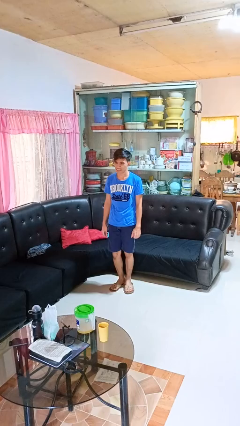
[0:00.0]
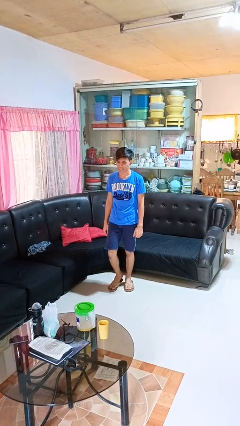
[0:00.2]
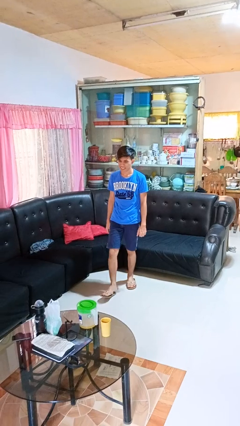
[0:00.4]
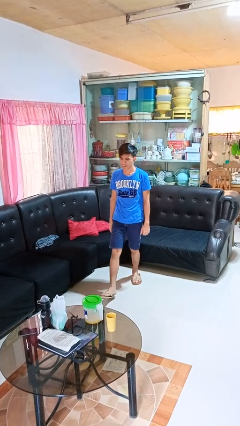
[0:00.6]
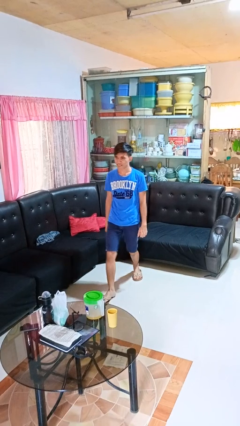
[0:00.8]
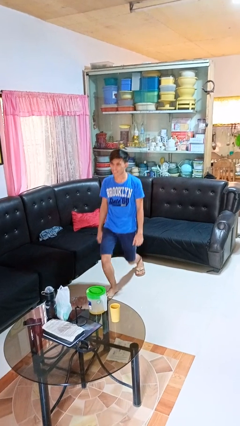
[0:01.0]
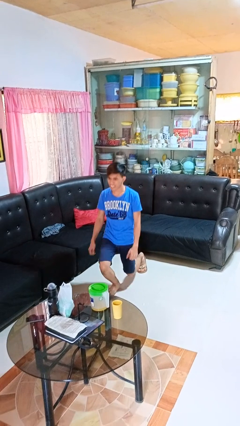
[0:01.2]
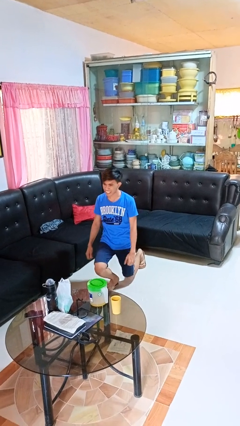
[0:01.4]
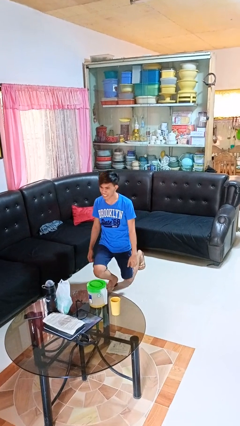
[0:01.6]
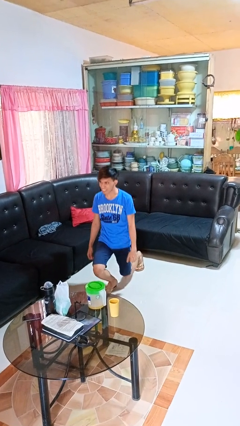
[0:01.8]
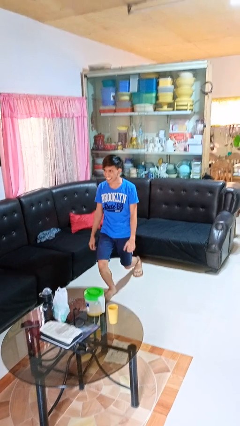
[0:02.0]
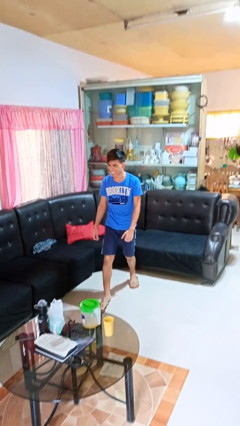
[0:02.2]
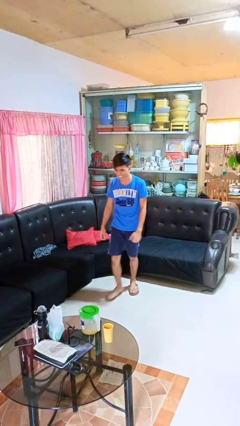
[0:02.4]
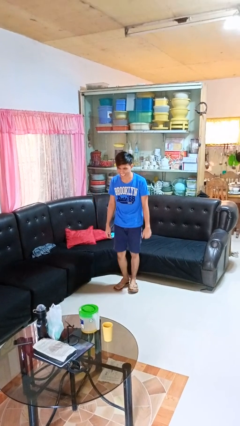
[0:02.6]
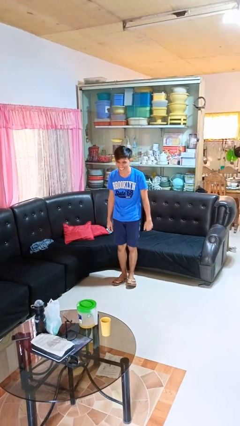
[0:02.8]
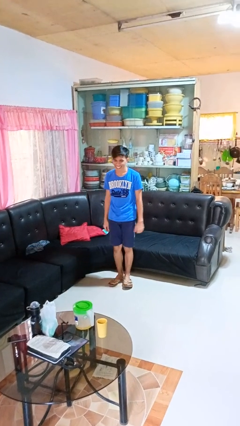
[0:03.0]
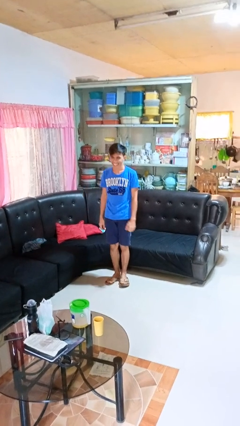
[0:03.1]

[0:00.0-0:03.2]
person exercises with lunges

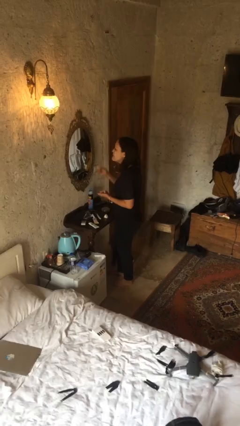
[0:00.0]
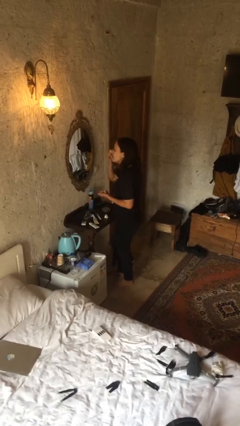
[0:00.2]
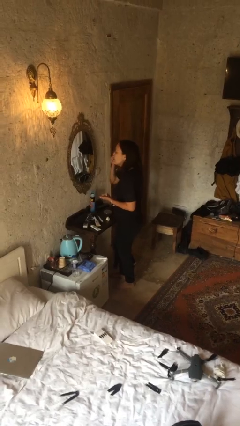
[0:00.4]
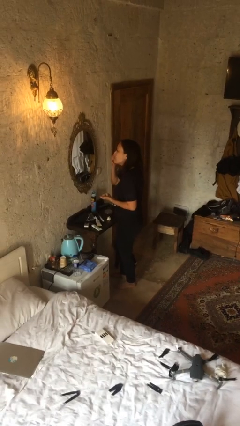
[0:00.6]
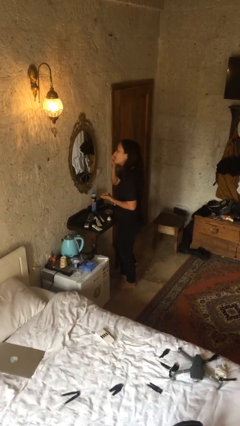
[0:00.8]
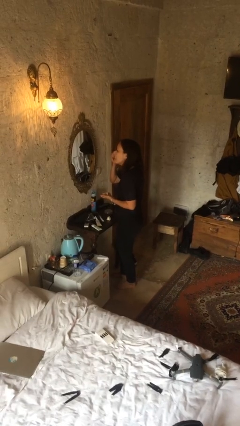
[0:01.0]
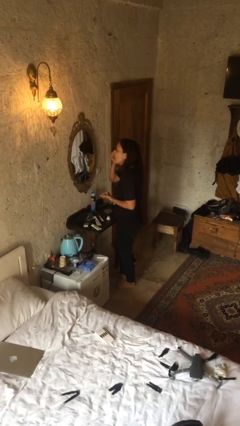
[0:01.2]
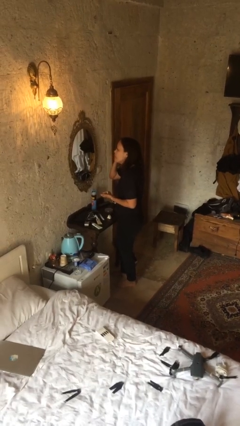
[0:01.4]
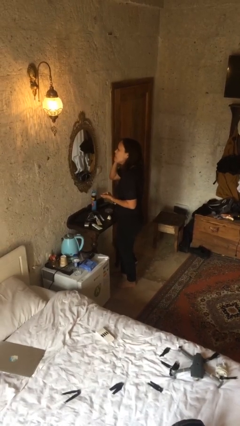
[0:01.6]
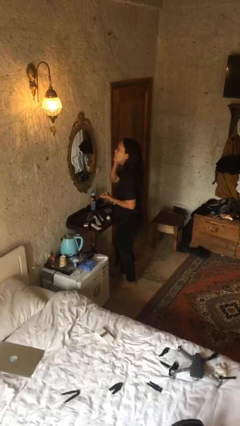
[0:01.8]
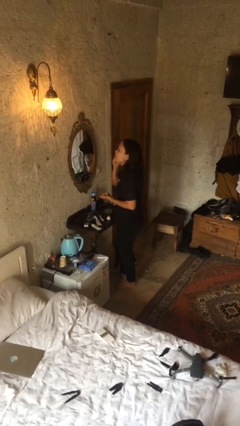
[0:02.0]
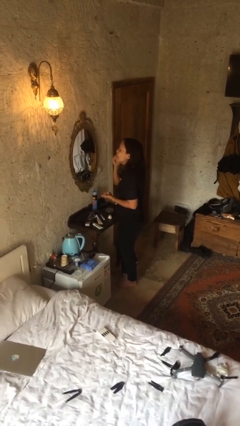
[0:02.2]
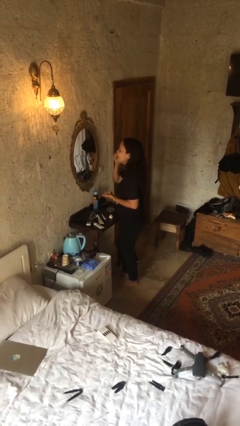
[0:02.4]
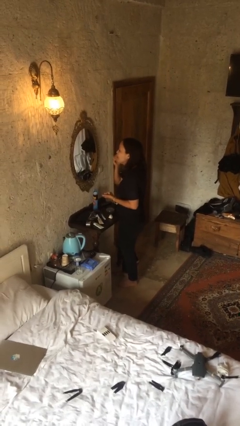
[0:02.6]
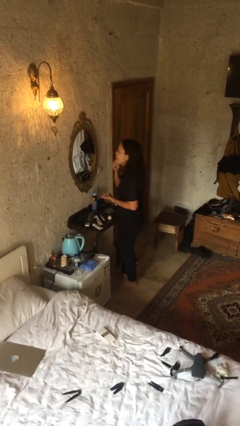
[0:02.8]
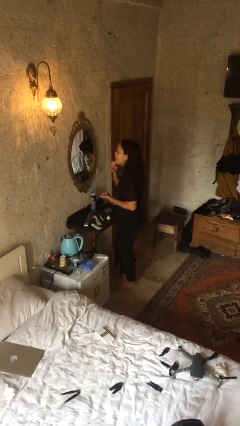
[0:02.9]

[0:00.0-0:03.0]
person applies foundation makeup

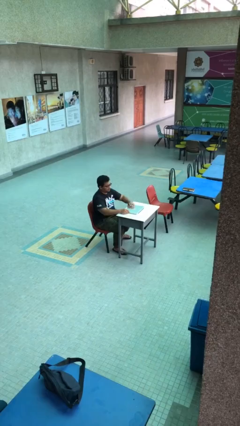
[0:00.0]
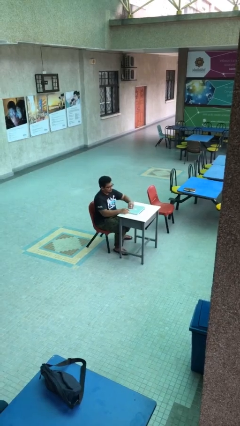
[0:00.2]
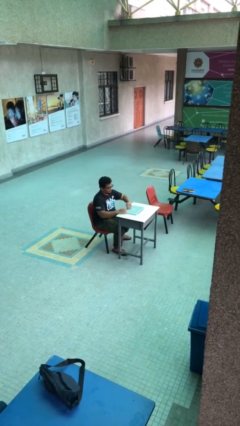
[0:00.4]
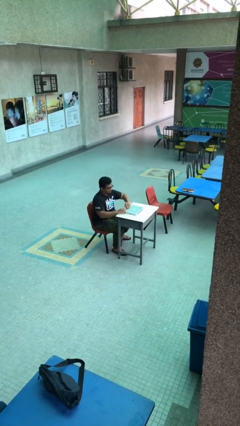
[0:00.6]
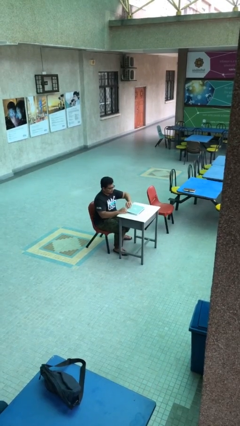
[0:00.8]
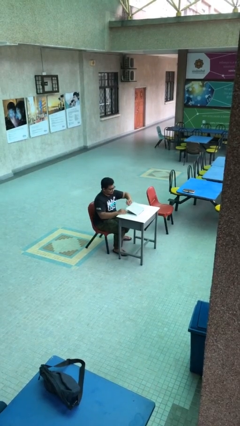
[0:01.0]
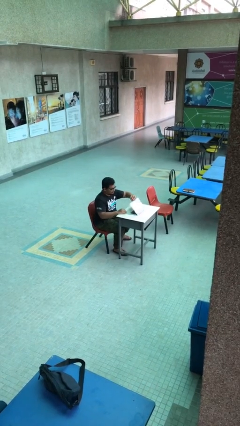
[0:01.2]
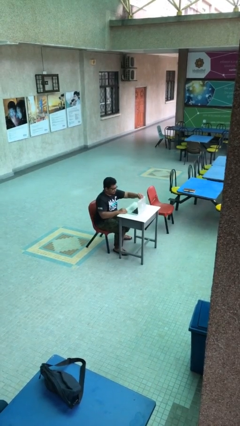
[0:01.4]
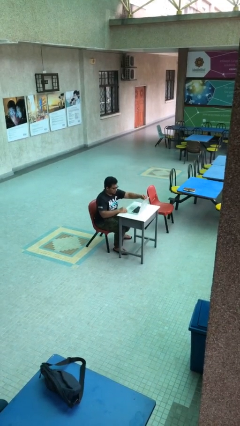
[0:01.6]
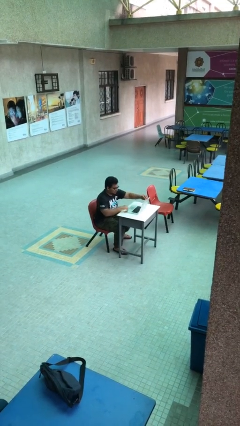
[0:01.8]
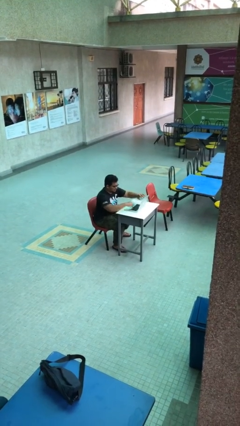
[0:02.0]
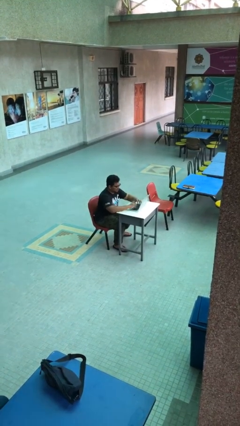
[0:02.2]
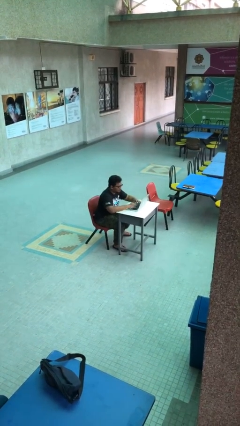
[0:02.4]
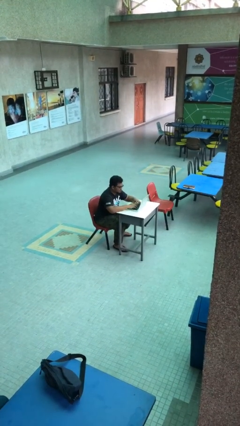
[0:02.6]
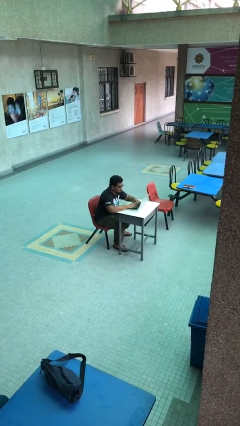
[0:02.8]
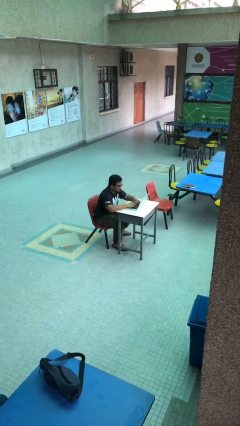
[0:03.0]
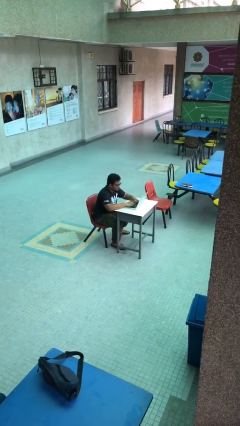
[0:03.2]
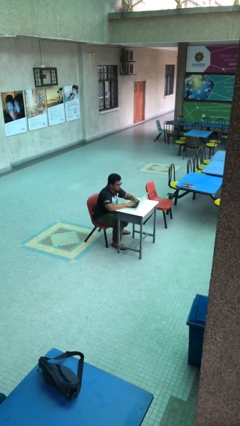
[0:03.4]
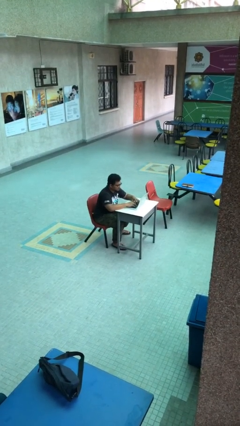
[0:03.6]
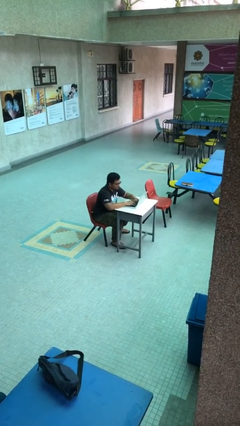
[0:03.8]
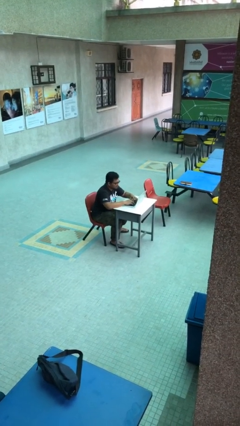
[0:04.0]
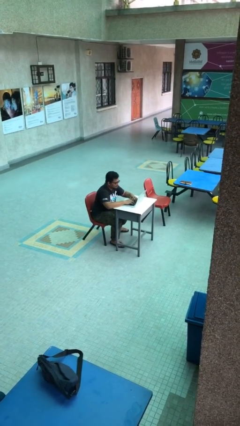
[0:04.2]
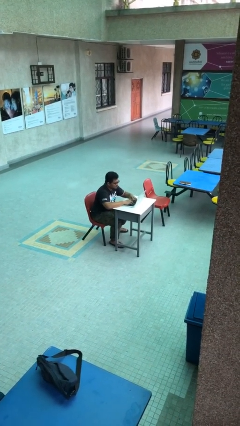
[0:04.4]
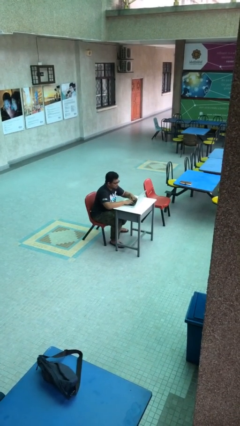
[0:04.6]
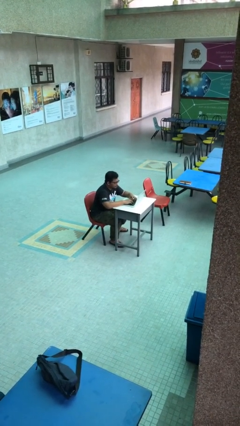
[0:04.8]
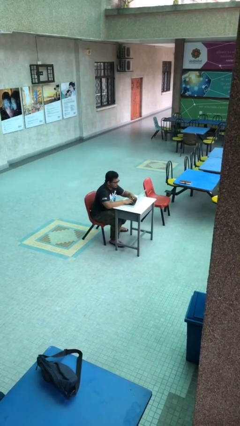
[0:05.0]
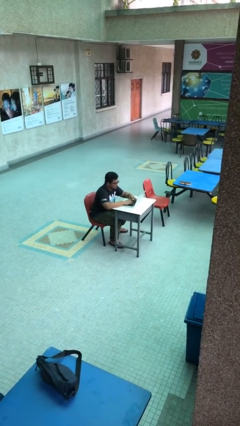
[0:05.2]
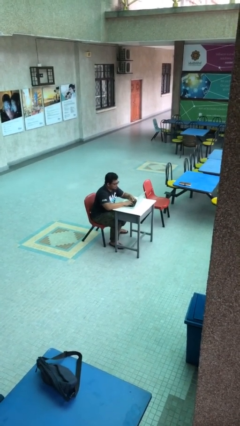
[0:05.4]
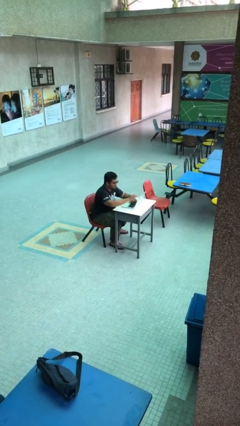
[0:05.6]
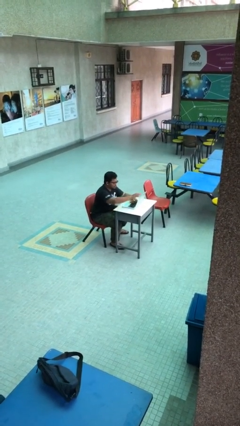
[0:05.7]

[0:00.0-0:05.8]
person interacts with laptop

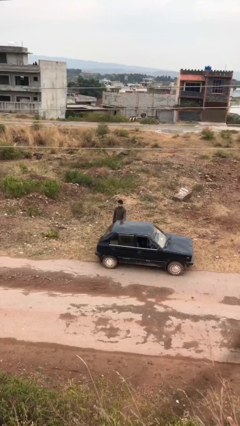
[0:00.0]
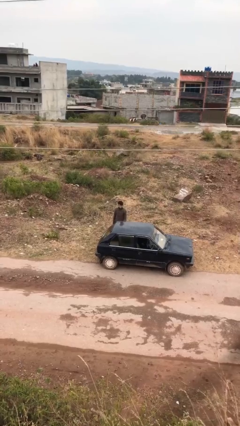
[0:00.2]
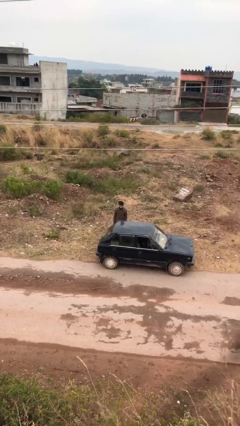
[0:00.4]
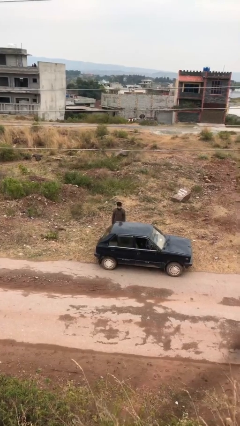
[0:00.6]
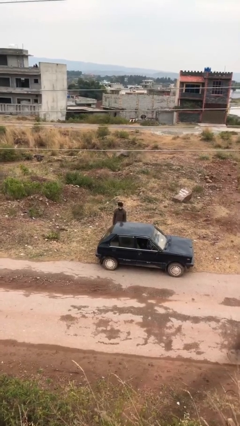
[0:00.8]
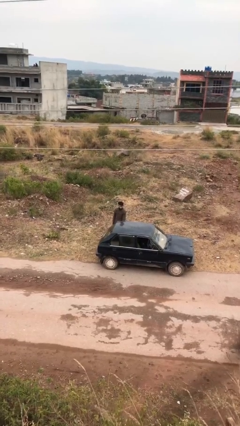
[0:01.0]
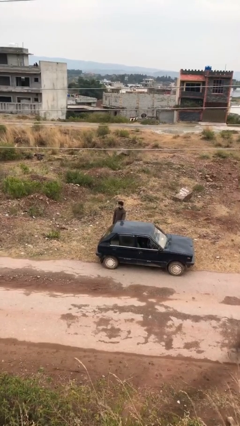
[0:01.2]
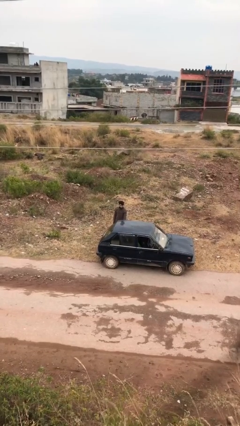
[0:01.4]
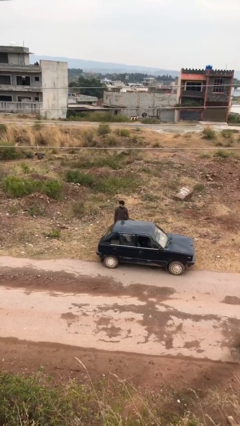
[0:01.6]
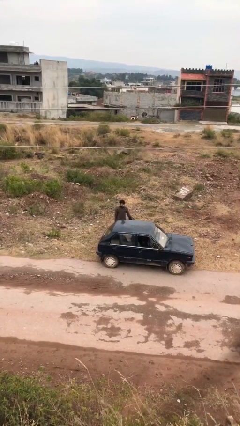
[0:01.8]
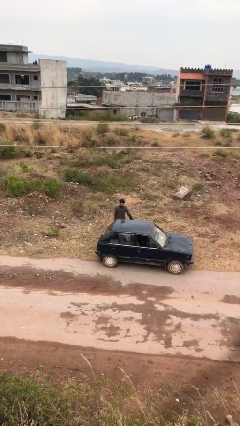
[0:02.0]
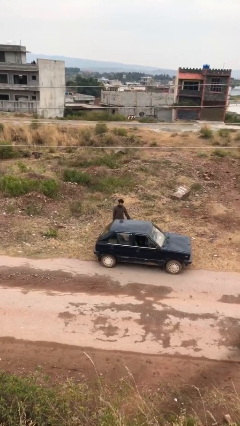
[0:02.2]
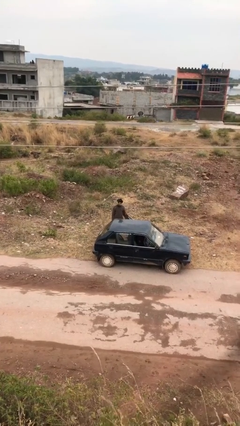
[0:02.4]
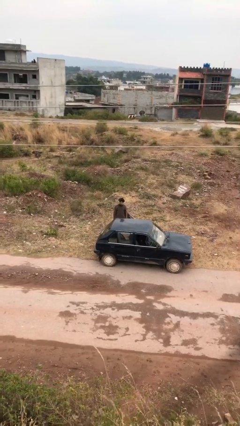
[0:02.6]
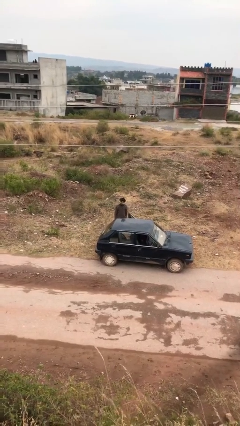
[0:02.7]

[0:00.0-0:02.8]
person opens car door

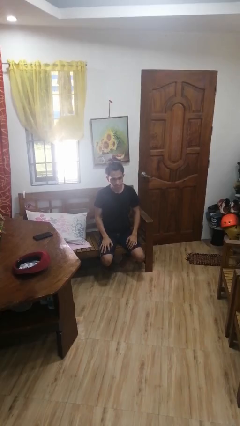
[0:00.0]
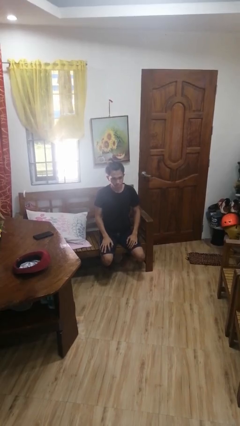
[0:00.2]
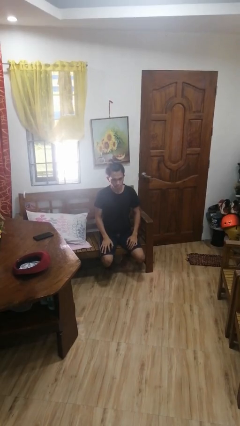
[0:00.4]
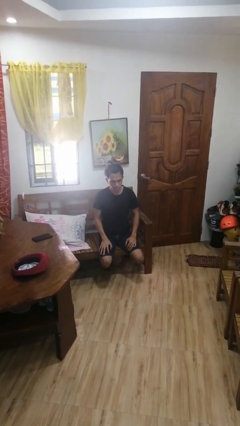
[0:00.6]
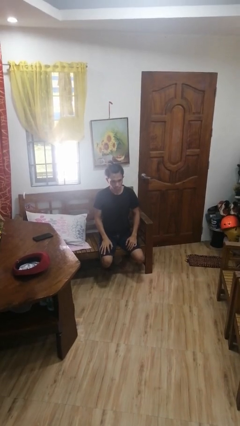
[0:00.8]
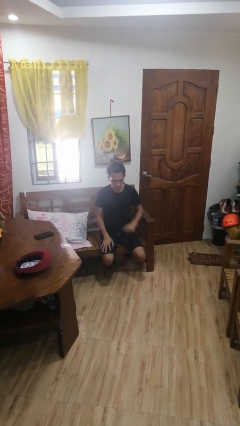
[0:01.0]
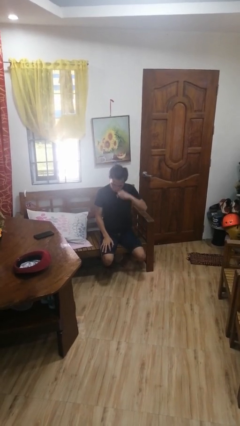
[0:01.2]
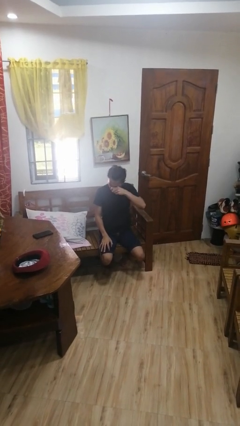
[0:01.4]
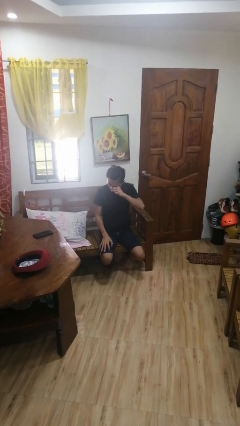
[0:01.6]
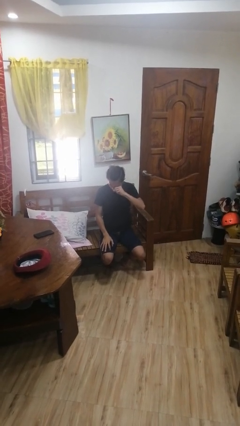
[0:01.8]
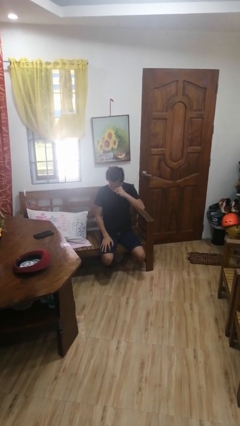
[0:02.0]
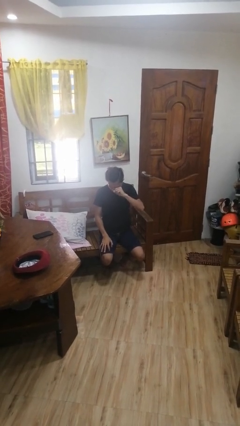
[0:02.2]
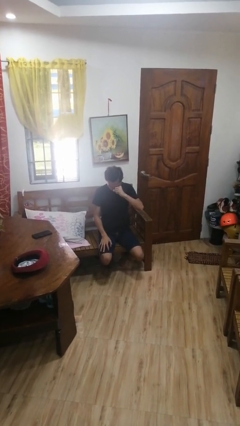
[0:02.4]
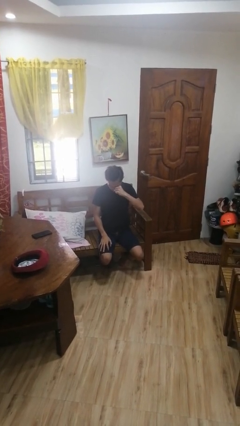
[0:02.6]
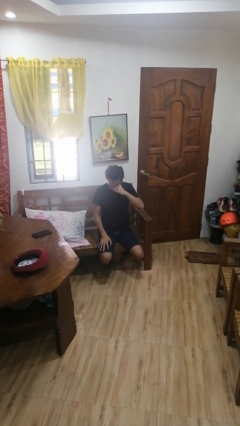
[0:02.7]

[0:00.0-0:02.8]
person rubs eyes

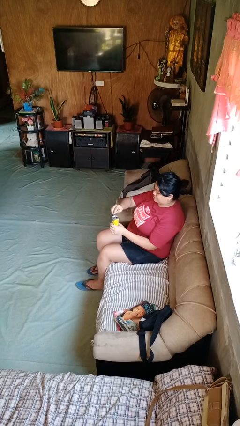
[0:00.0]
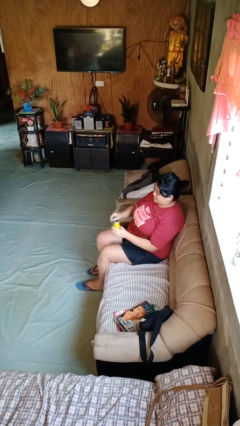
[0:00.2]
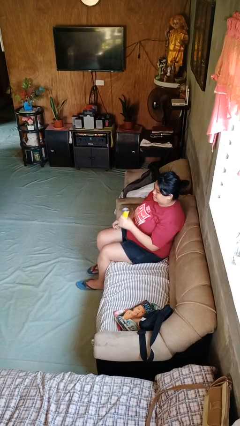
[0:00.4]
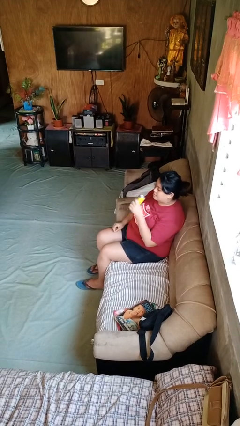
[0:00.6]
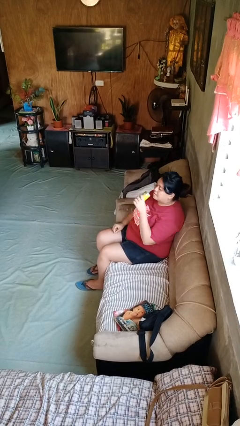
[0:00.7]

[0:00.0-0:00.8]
person drinks from beverage can
